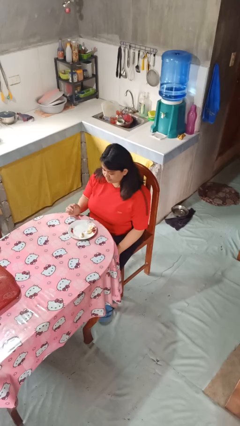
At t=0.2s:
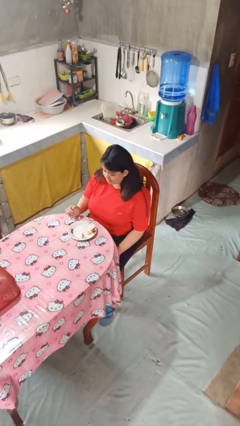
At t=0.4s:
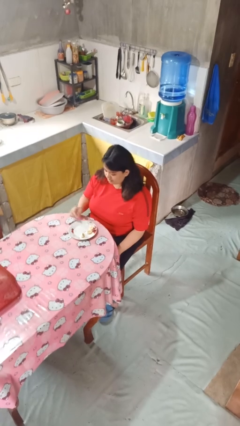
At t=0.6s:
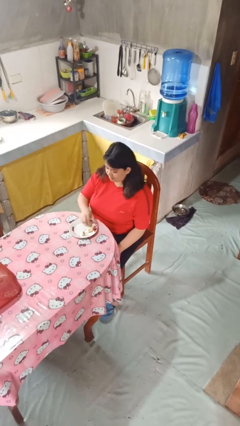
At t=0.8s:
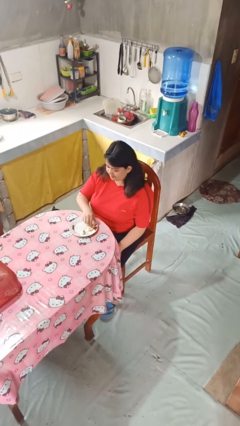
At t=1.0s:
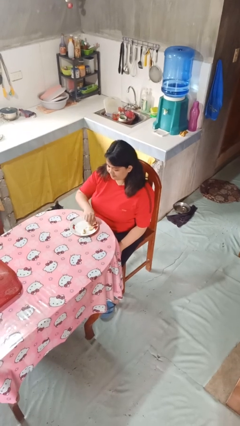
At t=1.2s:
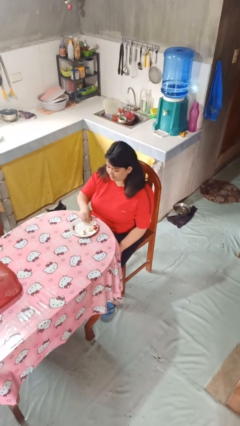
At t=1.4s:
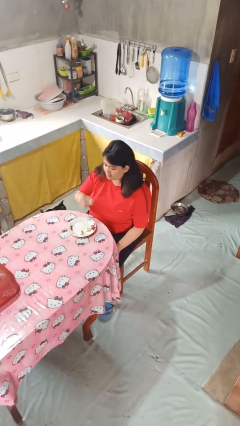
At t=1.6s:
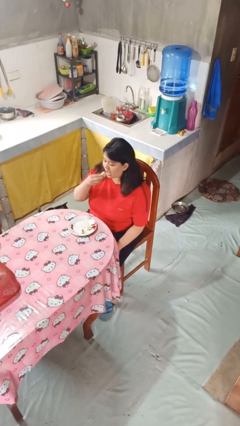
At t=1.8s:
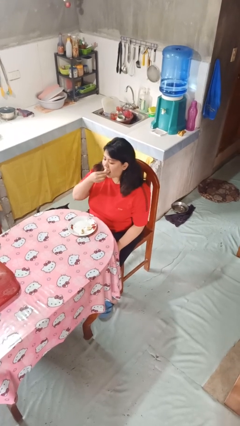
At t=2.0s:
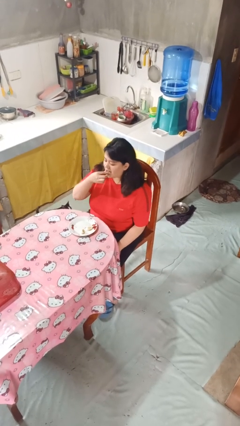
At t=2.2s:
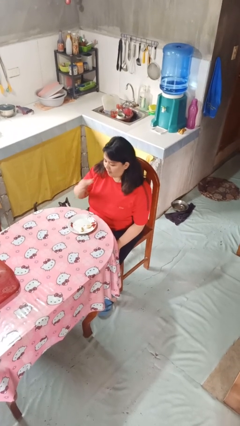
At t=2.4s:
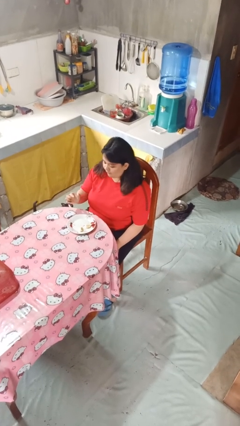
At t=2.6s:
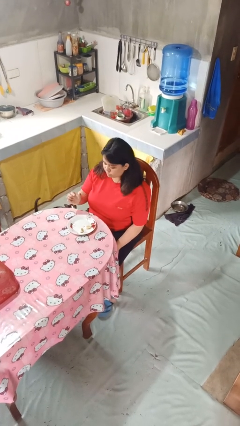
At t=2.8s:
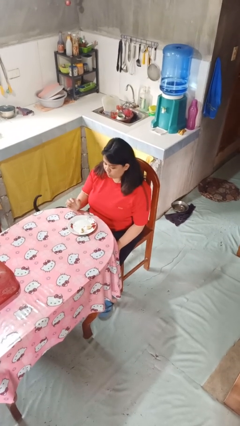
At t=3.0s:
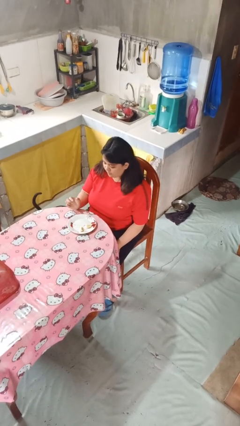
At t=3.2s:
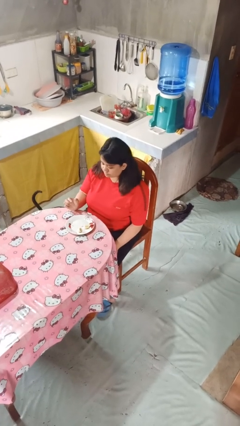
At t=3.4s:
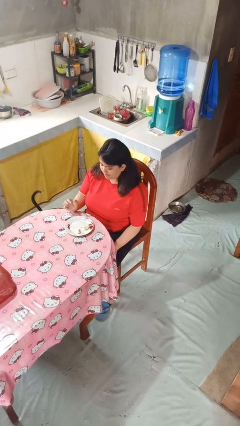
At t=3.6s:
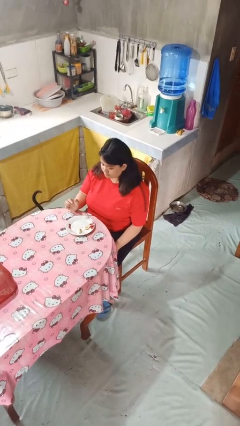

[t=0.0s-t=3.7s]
person eats with hands

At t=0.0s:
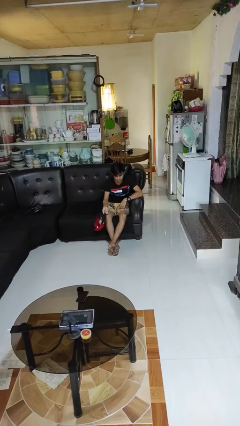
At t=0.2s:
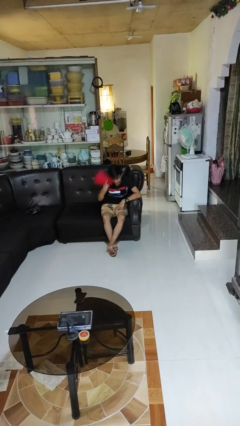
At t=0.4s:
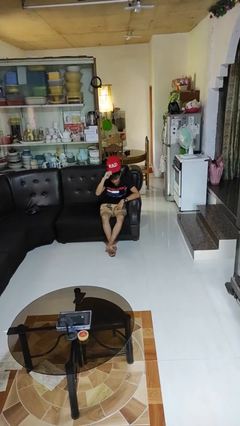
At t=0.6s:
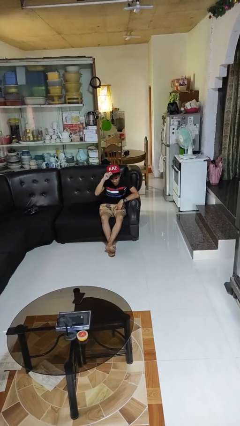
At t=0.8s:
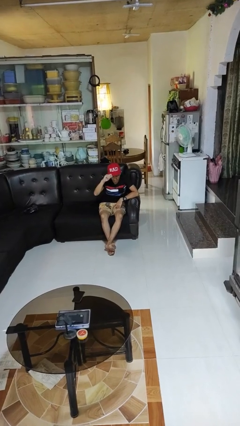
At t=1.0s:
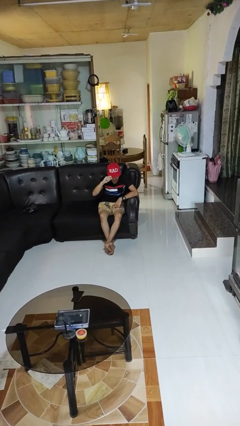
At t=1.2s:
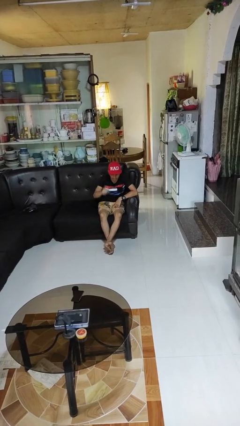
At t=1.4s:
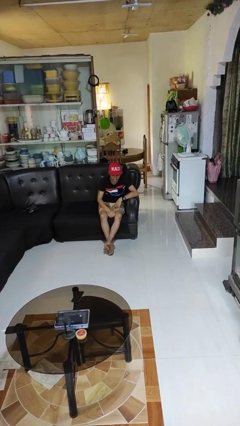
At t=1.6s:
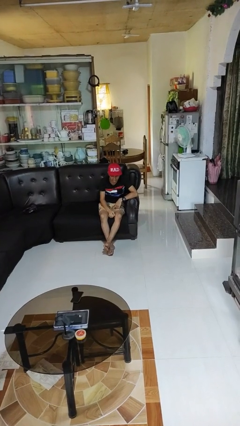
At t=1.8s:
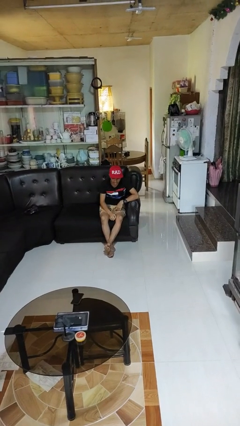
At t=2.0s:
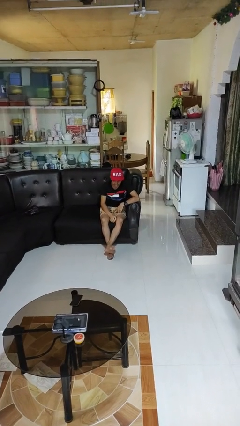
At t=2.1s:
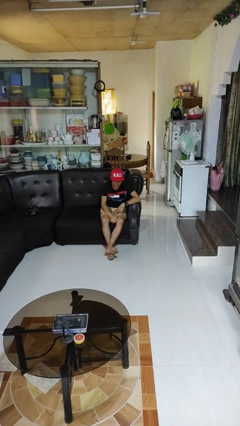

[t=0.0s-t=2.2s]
person puts on hat

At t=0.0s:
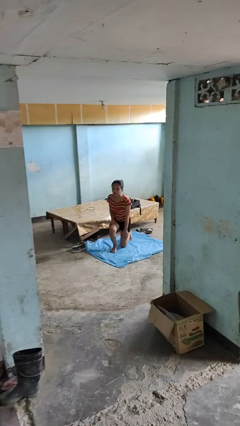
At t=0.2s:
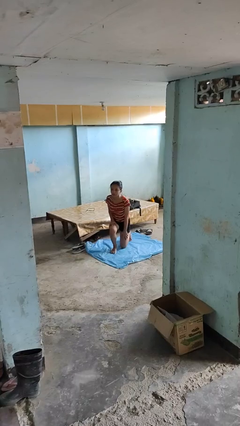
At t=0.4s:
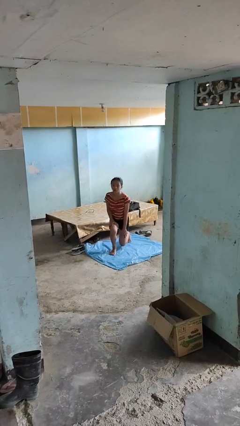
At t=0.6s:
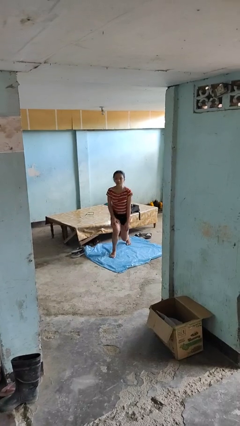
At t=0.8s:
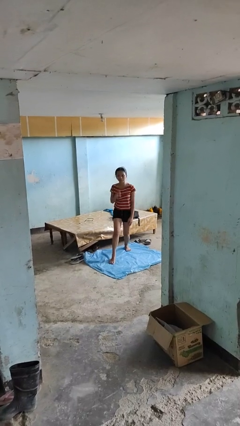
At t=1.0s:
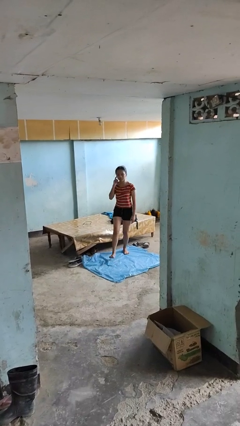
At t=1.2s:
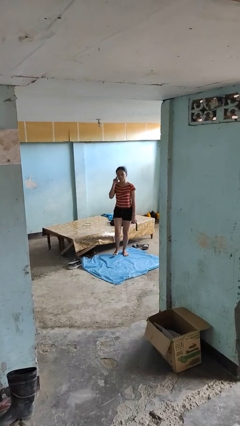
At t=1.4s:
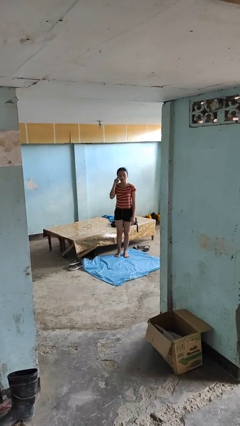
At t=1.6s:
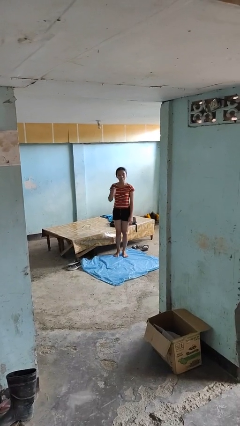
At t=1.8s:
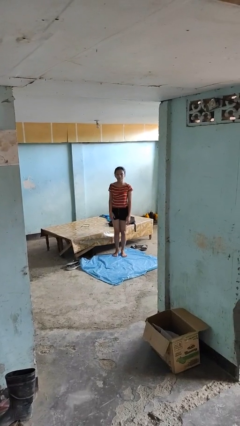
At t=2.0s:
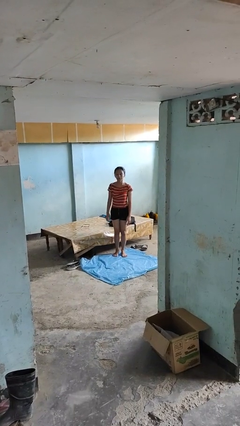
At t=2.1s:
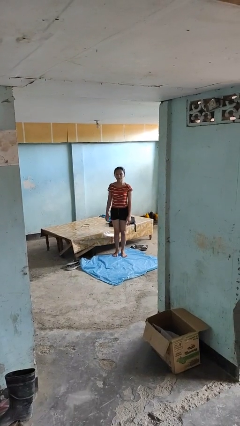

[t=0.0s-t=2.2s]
person stands up from floor

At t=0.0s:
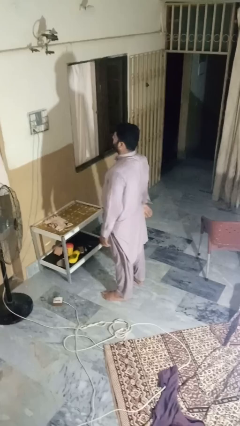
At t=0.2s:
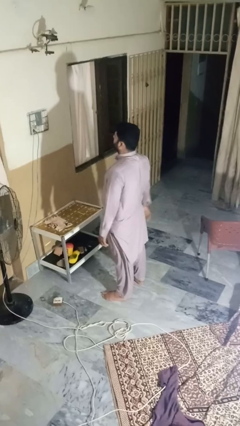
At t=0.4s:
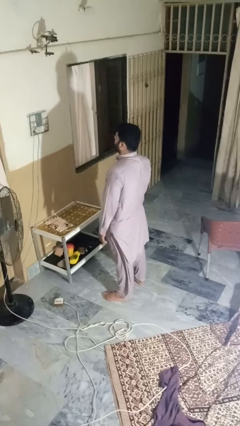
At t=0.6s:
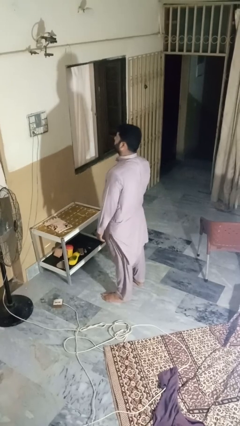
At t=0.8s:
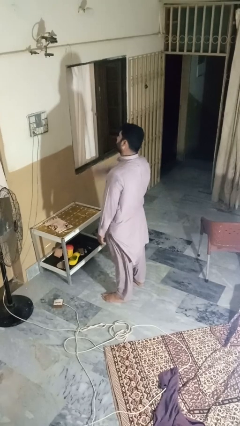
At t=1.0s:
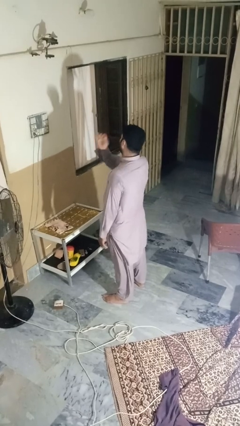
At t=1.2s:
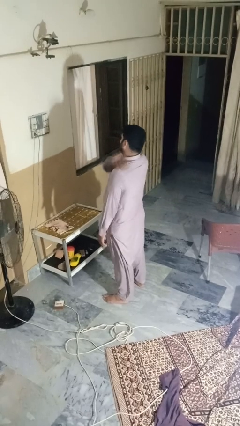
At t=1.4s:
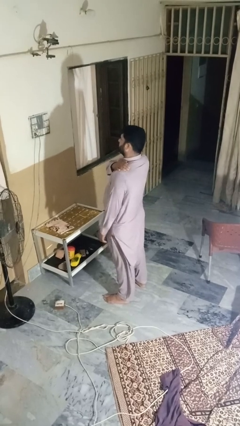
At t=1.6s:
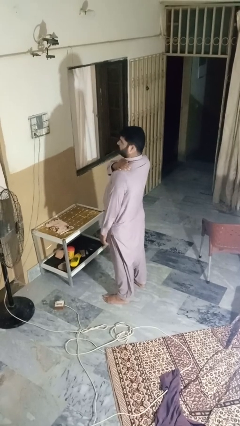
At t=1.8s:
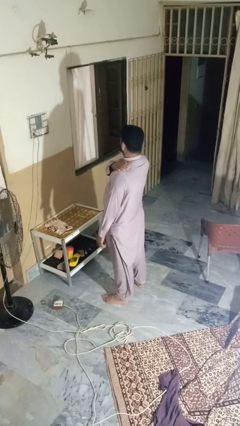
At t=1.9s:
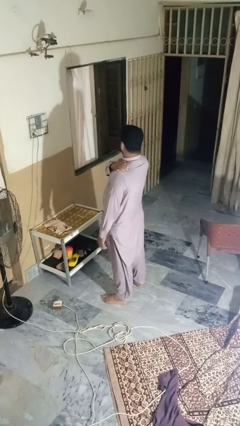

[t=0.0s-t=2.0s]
person shrugs

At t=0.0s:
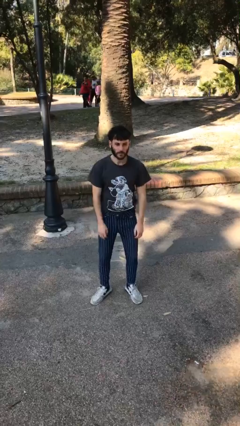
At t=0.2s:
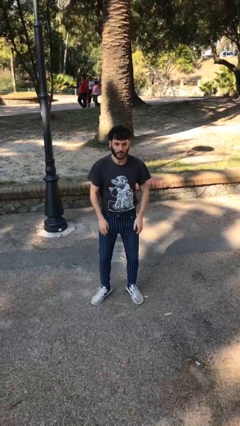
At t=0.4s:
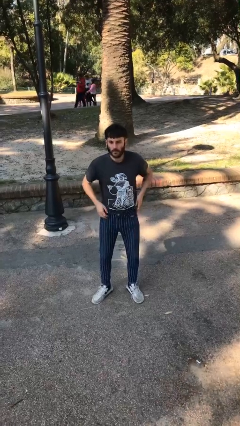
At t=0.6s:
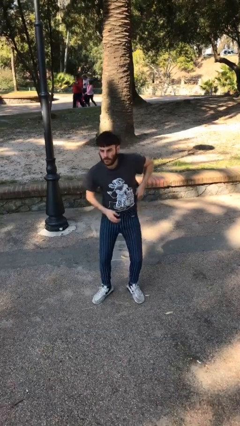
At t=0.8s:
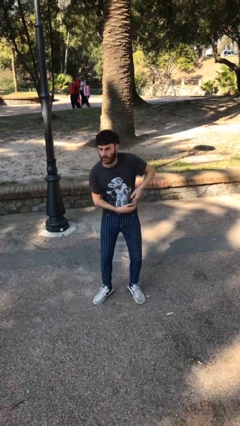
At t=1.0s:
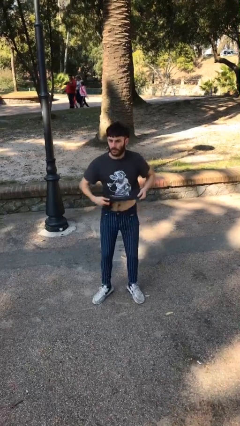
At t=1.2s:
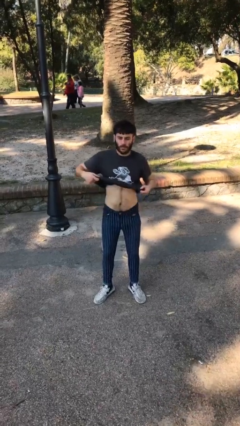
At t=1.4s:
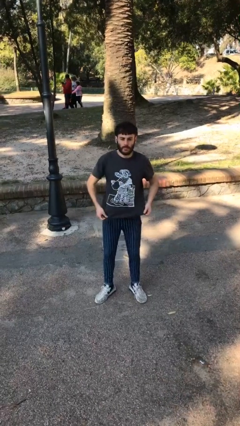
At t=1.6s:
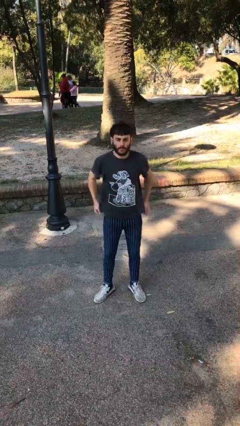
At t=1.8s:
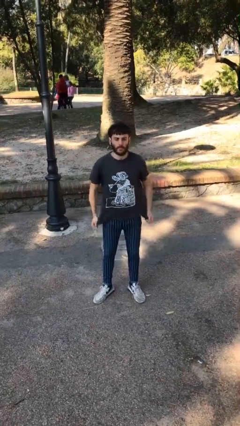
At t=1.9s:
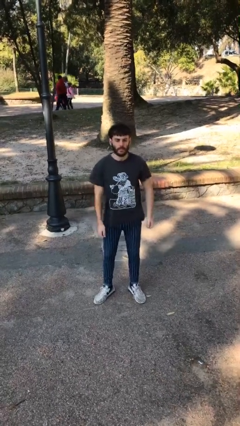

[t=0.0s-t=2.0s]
person untucks shirt

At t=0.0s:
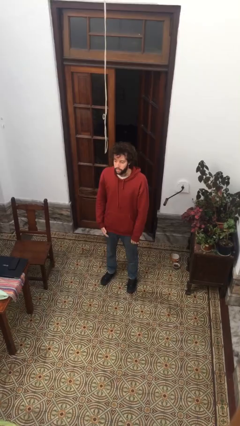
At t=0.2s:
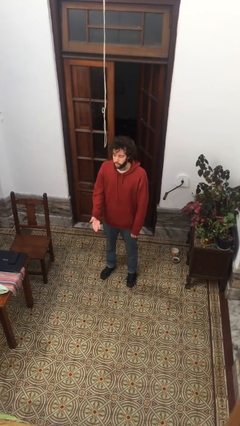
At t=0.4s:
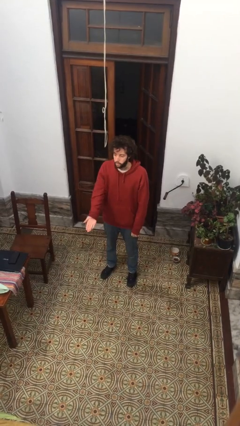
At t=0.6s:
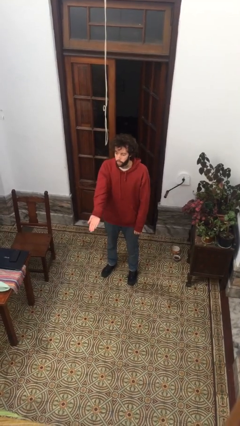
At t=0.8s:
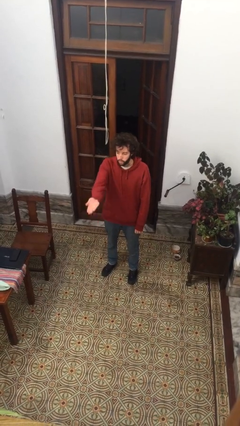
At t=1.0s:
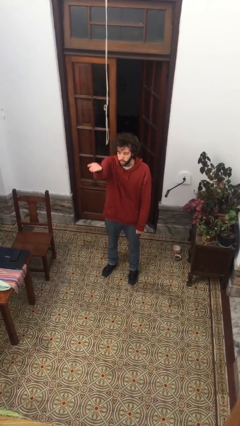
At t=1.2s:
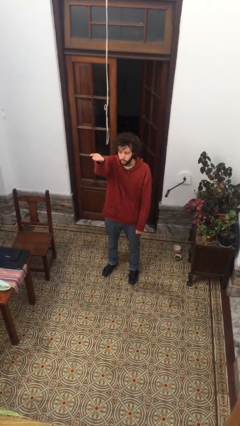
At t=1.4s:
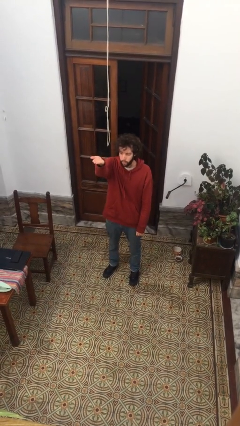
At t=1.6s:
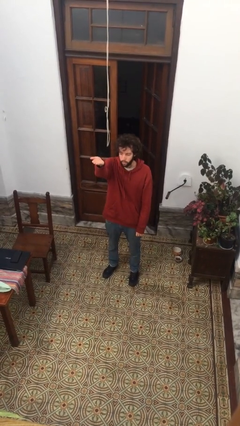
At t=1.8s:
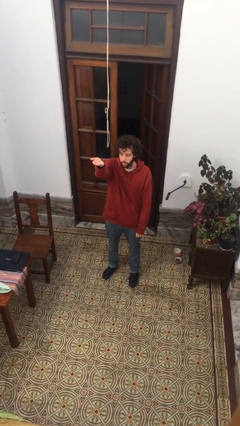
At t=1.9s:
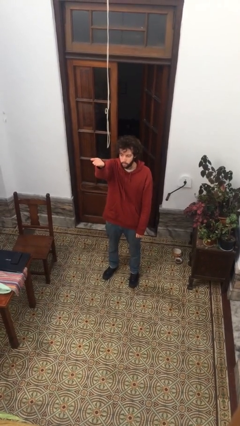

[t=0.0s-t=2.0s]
person gestures swipe up

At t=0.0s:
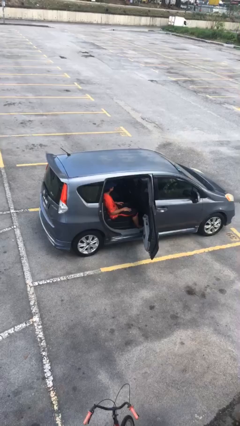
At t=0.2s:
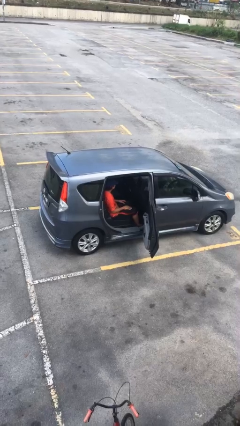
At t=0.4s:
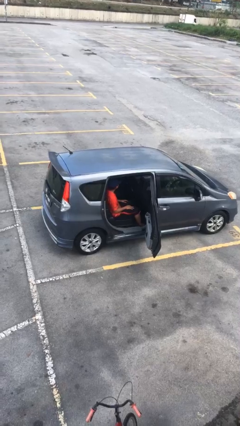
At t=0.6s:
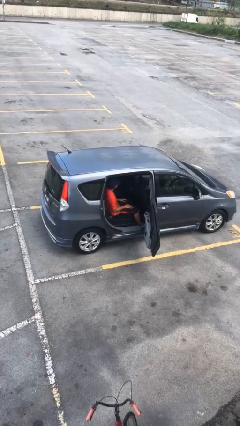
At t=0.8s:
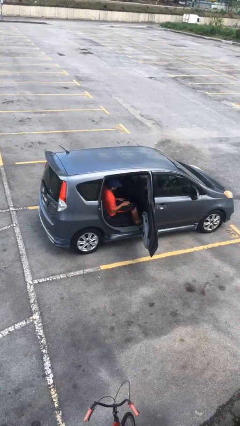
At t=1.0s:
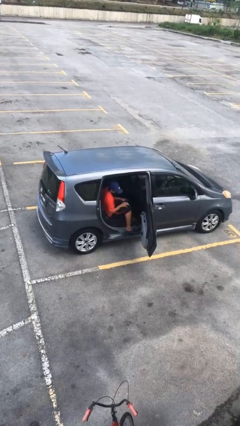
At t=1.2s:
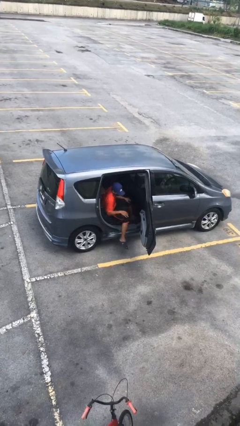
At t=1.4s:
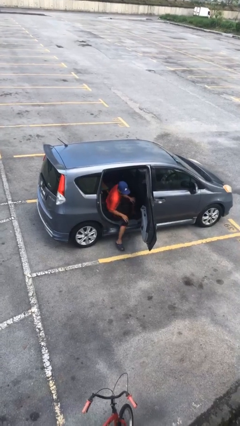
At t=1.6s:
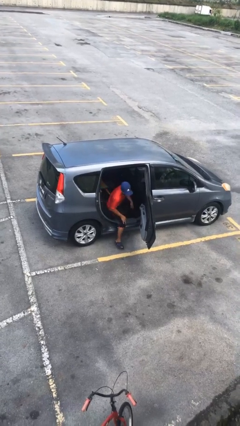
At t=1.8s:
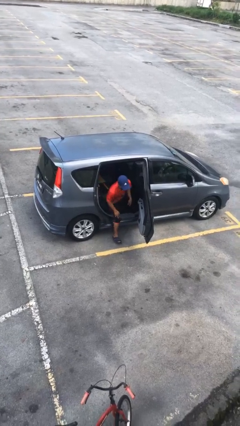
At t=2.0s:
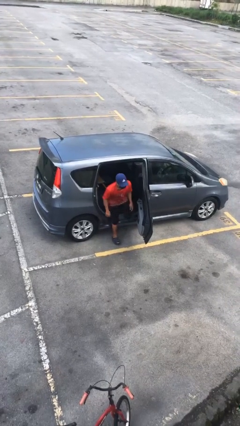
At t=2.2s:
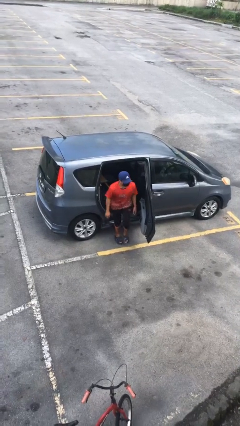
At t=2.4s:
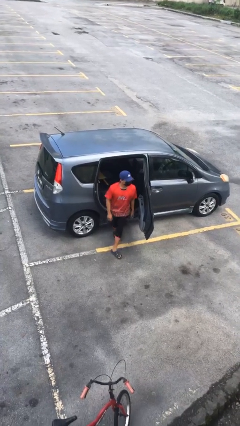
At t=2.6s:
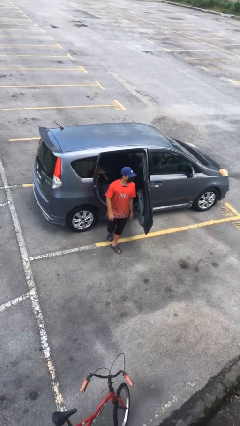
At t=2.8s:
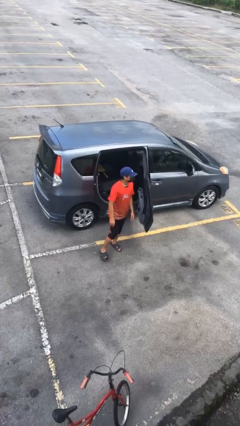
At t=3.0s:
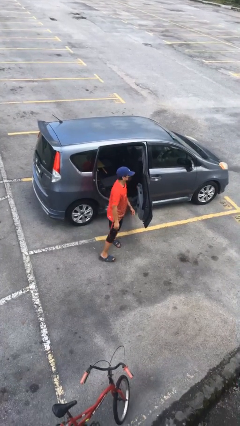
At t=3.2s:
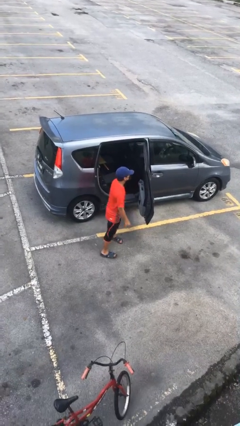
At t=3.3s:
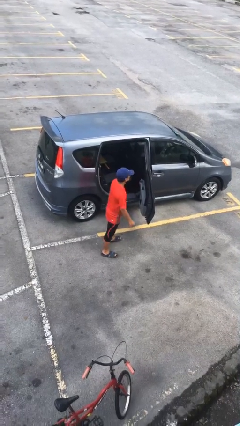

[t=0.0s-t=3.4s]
person exits car
